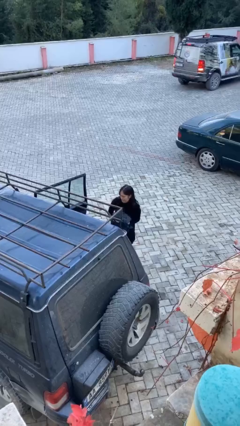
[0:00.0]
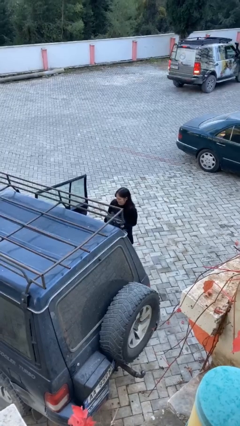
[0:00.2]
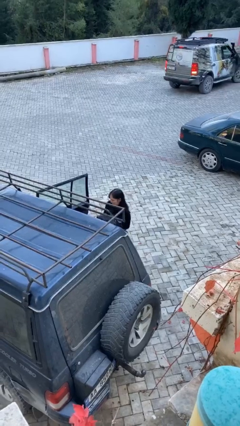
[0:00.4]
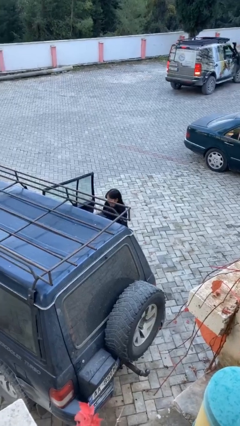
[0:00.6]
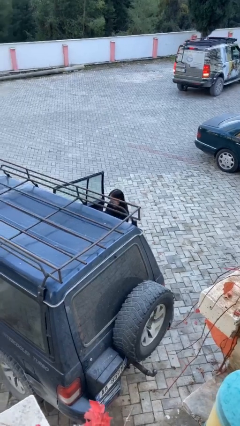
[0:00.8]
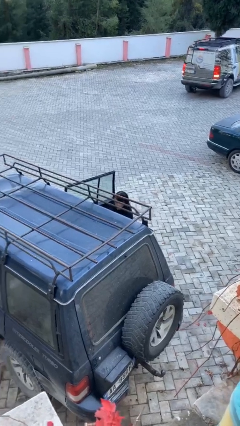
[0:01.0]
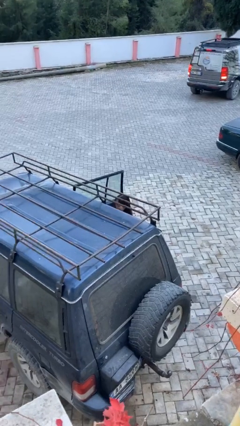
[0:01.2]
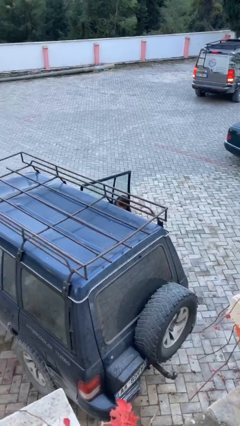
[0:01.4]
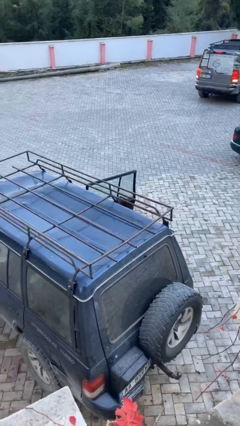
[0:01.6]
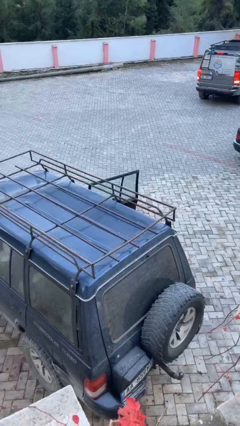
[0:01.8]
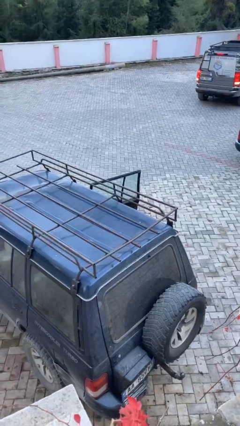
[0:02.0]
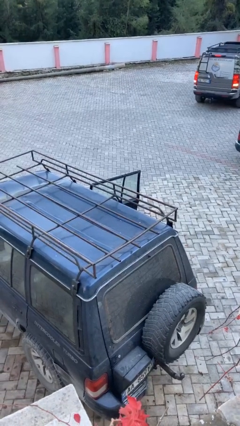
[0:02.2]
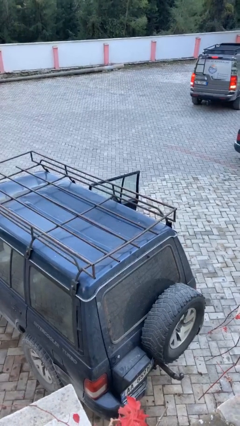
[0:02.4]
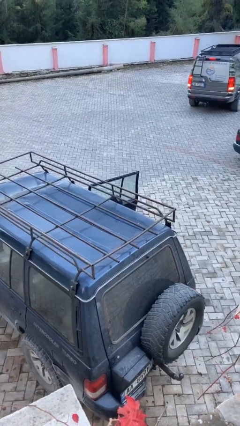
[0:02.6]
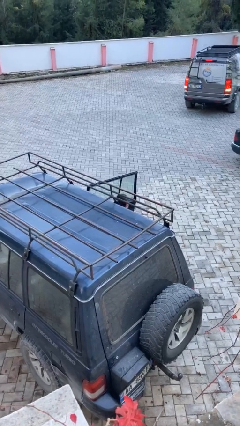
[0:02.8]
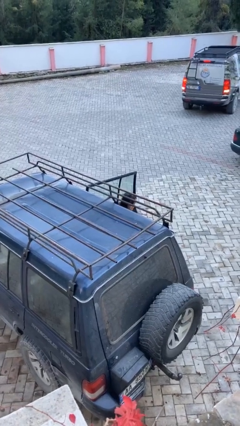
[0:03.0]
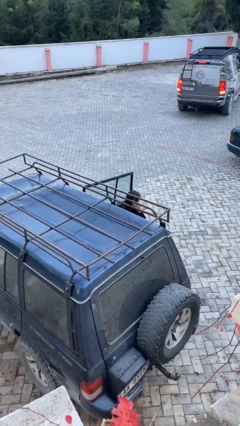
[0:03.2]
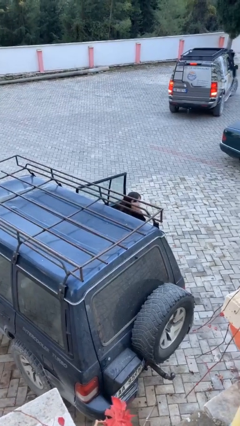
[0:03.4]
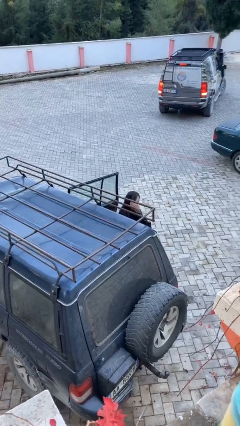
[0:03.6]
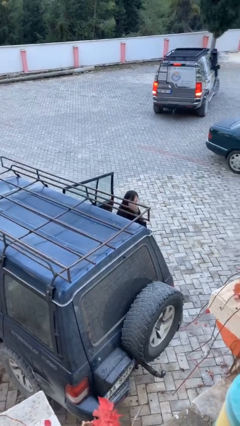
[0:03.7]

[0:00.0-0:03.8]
person loads car

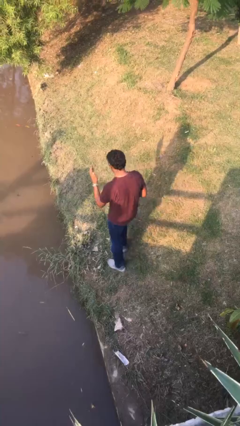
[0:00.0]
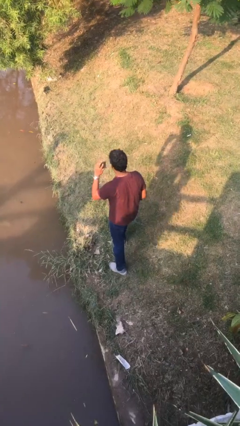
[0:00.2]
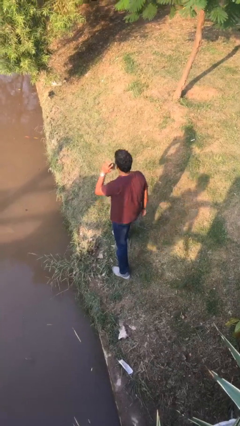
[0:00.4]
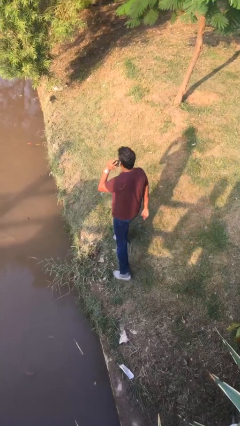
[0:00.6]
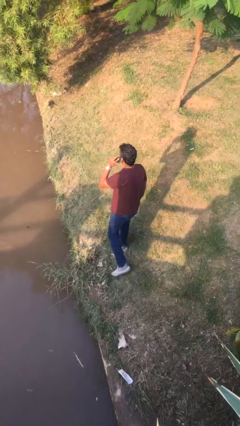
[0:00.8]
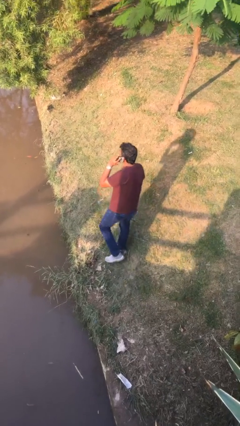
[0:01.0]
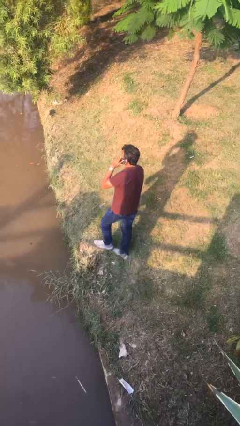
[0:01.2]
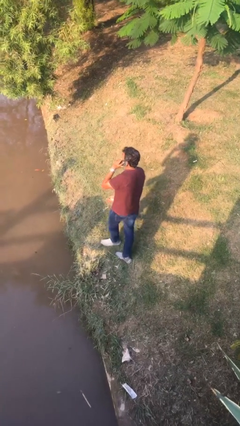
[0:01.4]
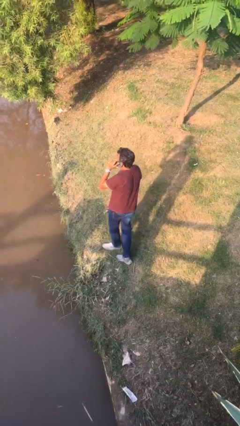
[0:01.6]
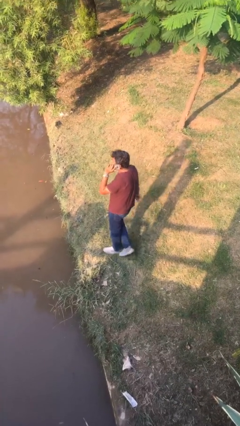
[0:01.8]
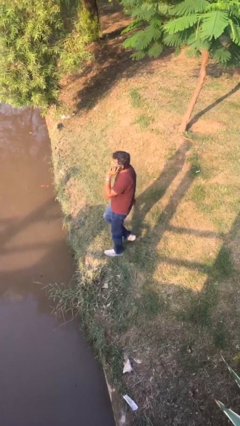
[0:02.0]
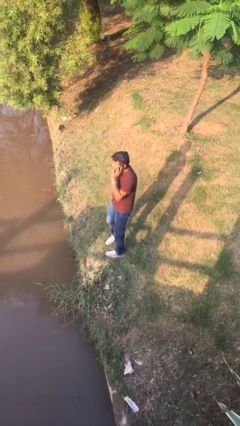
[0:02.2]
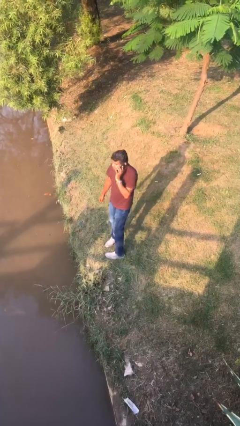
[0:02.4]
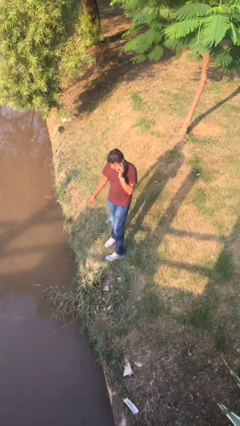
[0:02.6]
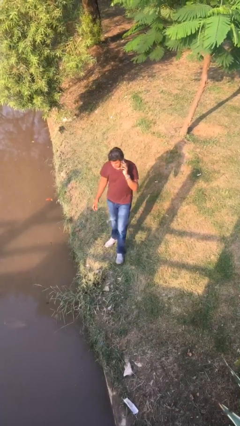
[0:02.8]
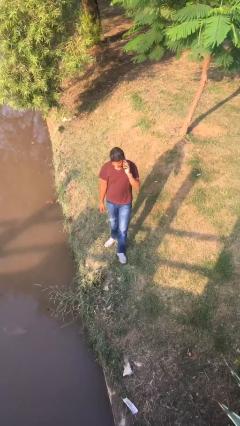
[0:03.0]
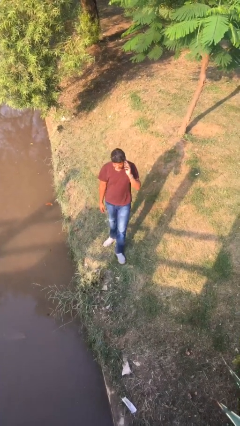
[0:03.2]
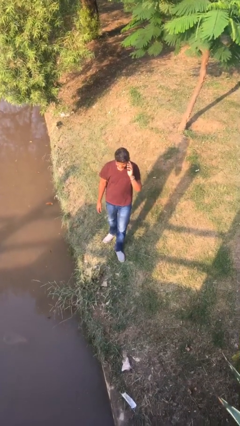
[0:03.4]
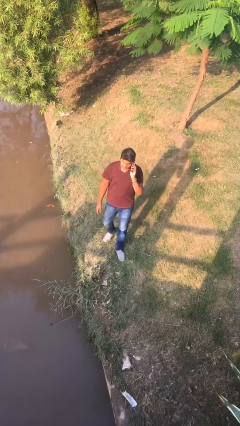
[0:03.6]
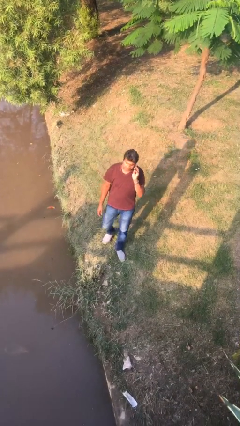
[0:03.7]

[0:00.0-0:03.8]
person talks on phone

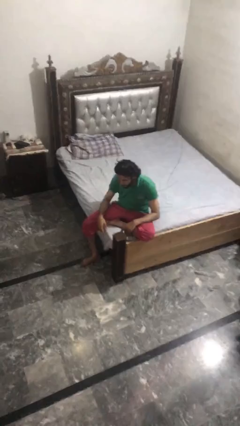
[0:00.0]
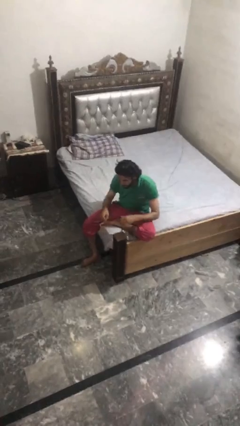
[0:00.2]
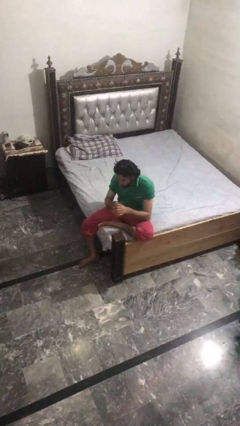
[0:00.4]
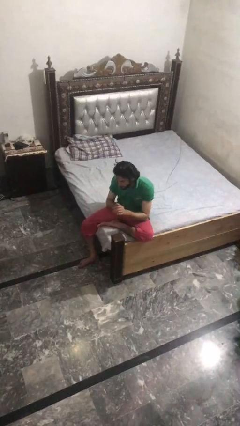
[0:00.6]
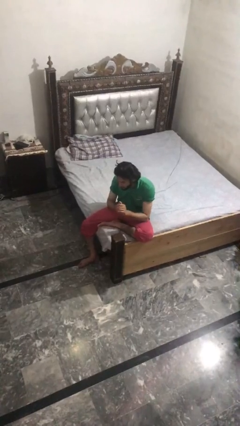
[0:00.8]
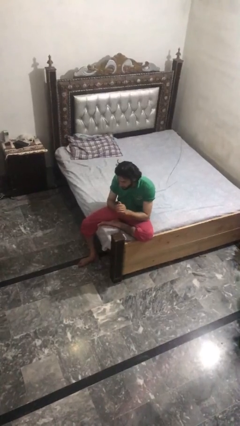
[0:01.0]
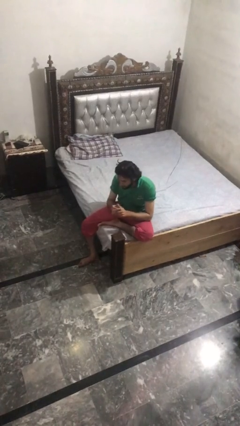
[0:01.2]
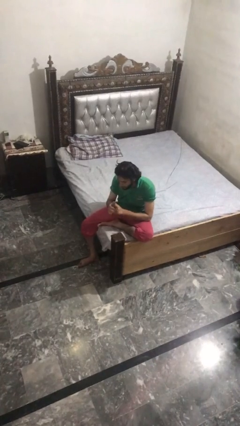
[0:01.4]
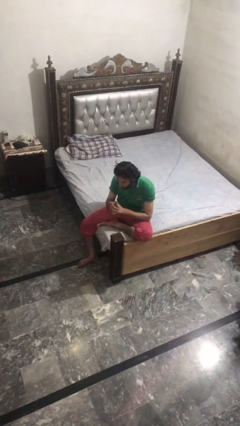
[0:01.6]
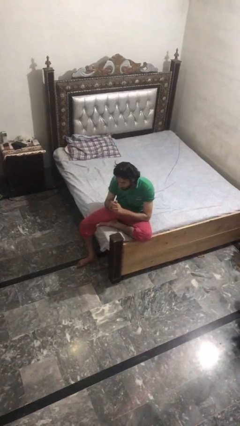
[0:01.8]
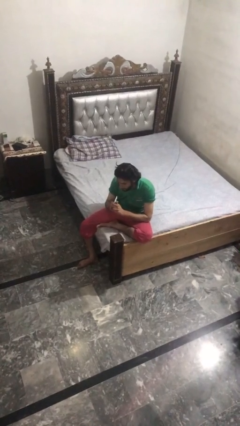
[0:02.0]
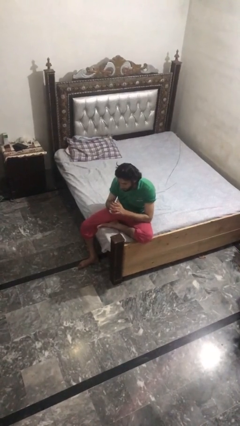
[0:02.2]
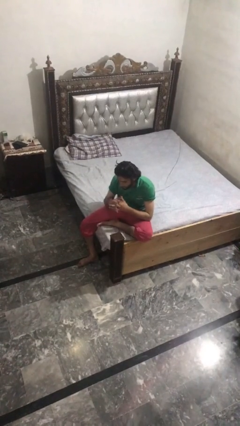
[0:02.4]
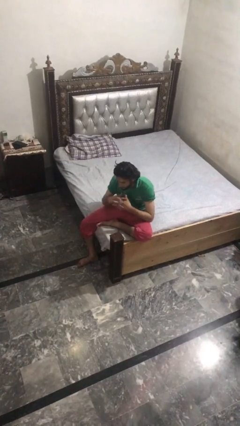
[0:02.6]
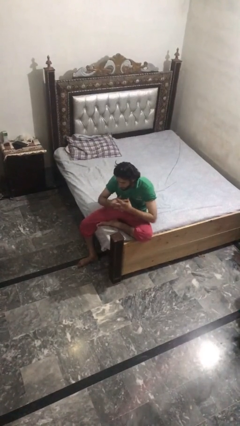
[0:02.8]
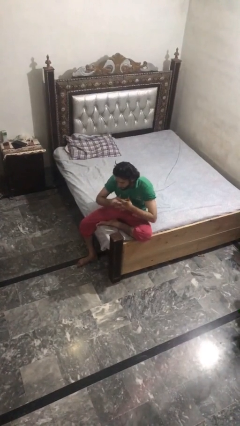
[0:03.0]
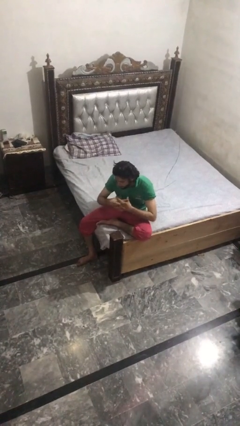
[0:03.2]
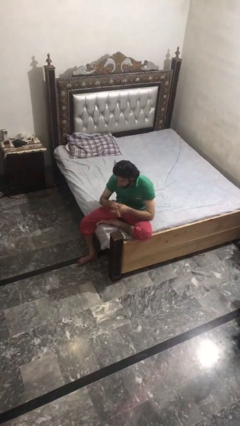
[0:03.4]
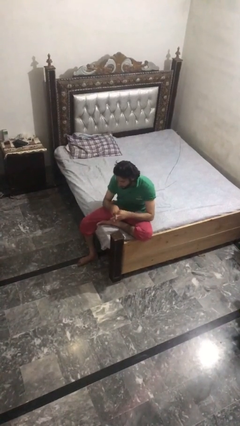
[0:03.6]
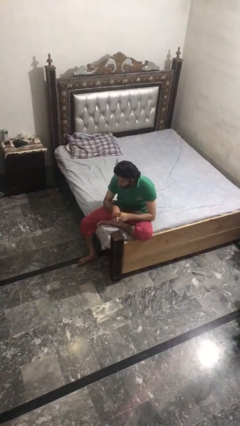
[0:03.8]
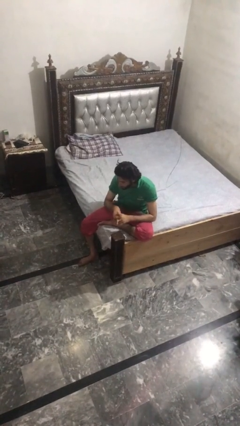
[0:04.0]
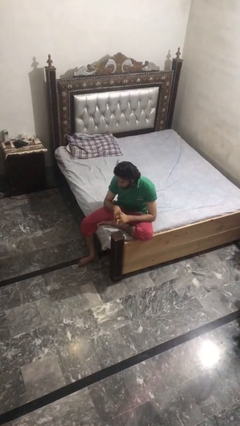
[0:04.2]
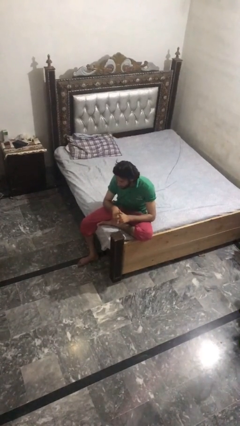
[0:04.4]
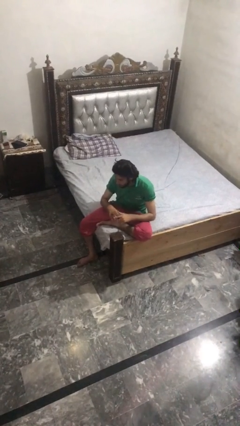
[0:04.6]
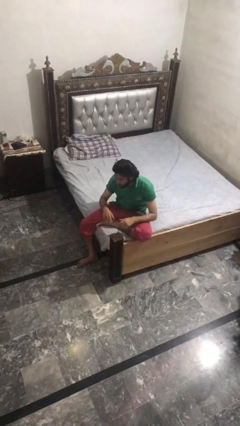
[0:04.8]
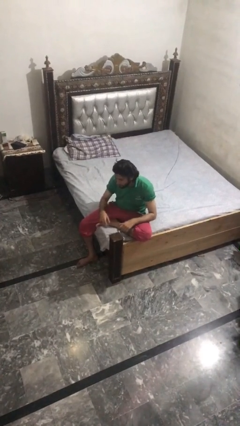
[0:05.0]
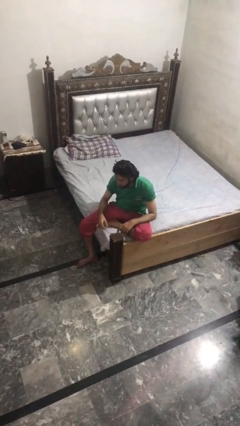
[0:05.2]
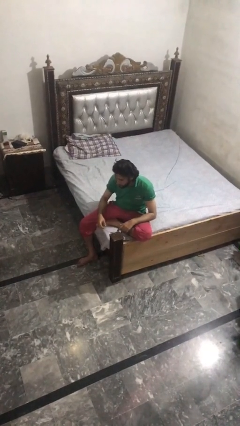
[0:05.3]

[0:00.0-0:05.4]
person cracks knuckles

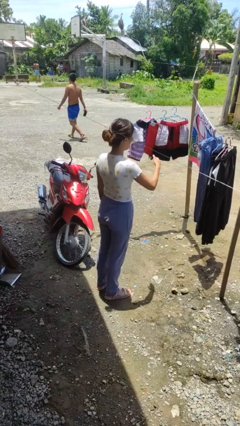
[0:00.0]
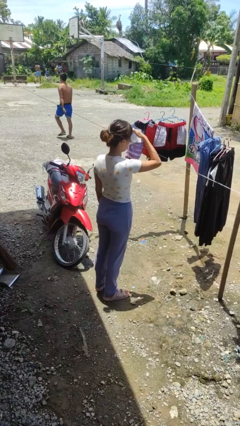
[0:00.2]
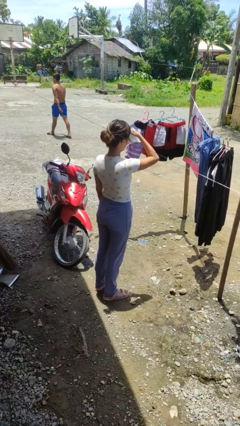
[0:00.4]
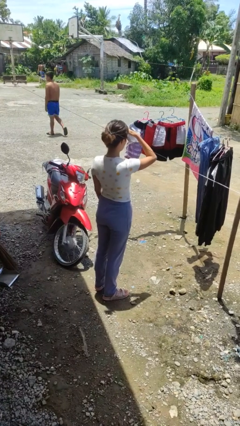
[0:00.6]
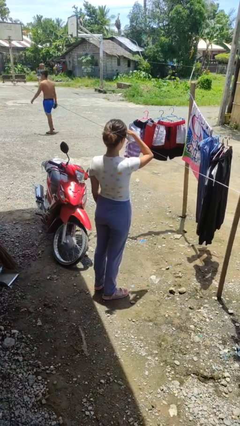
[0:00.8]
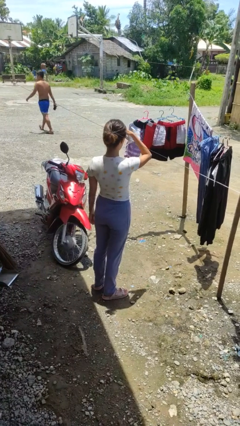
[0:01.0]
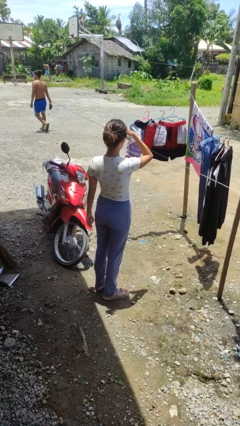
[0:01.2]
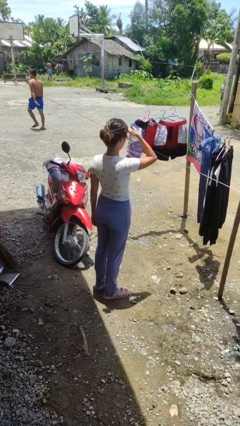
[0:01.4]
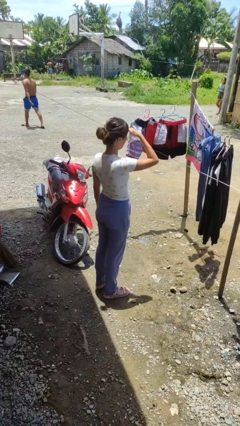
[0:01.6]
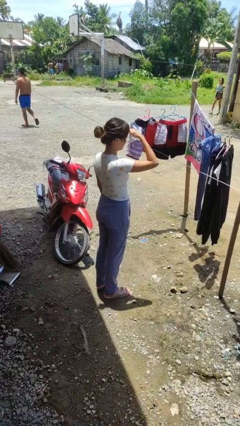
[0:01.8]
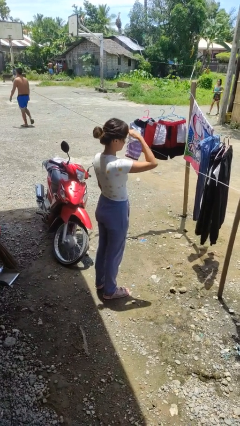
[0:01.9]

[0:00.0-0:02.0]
person shades eyes

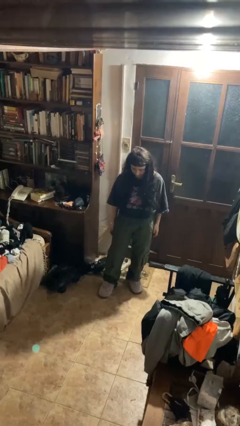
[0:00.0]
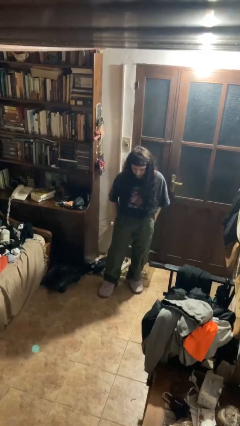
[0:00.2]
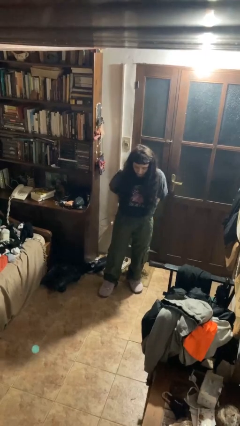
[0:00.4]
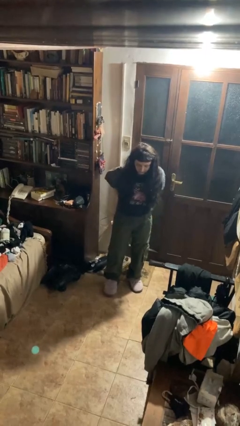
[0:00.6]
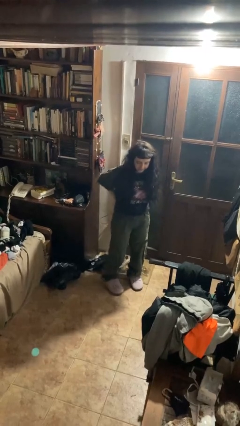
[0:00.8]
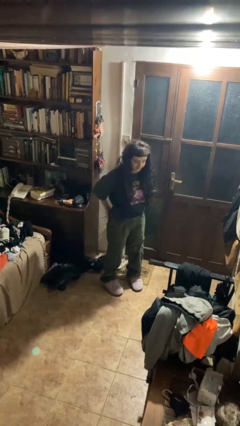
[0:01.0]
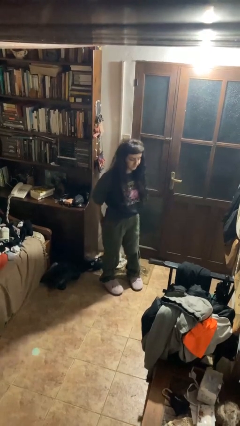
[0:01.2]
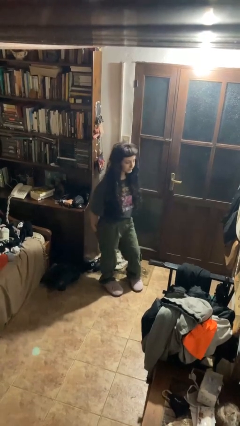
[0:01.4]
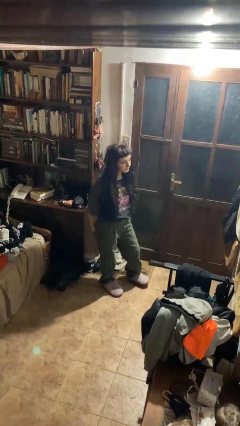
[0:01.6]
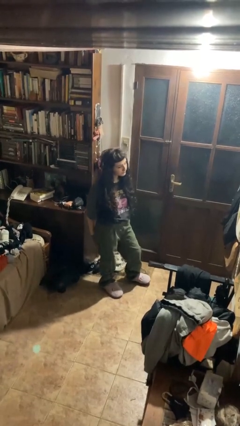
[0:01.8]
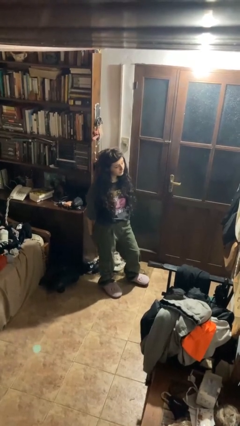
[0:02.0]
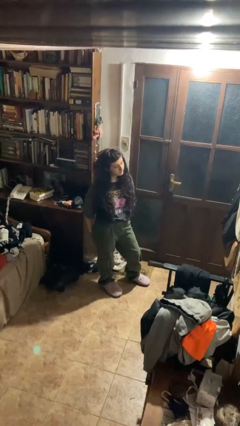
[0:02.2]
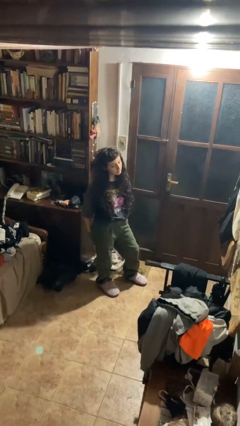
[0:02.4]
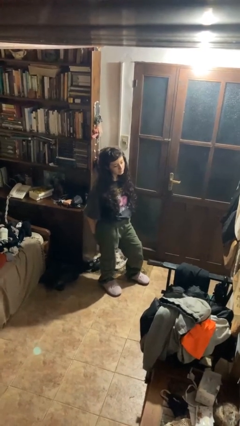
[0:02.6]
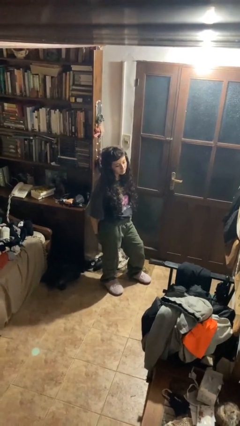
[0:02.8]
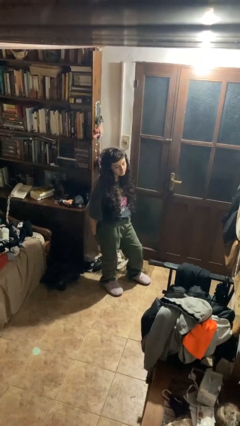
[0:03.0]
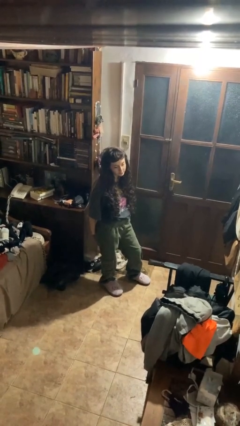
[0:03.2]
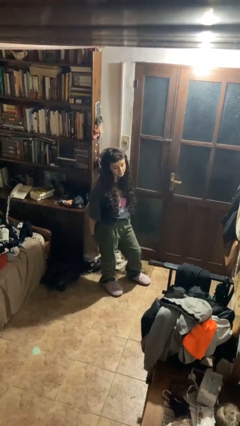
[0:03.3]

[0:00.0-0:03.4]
person puts hands in back pockets
